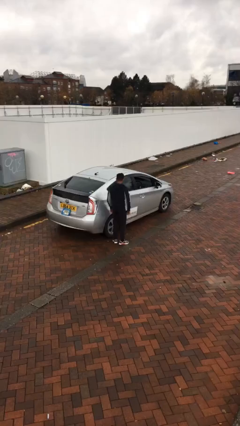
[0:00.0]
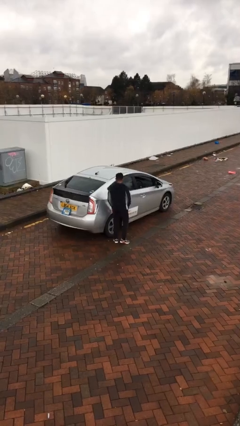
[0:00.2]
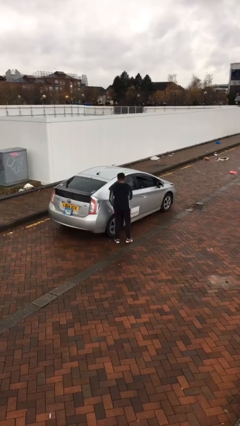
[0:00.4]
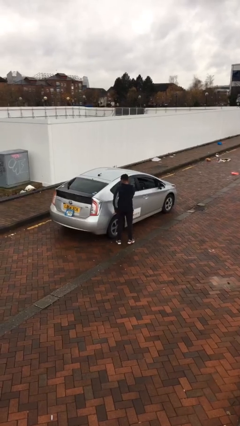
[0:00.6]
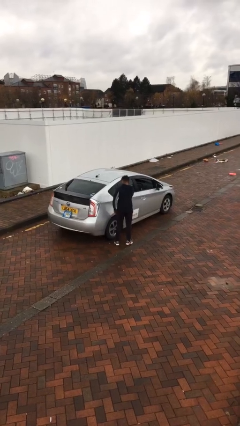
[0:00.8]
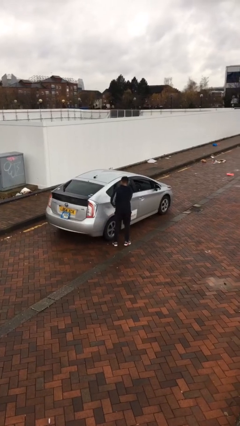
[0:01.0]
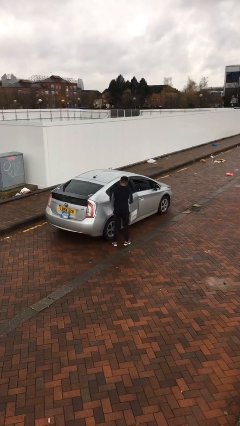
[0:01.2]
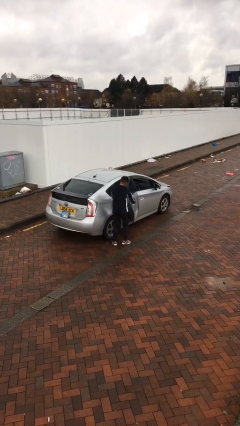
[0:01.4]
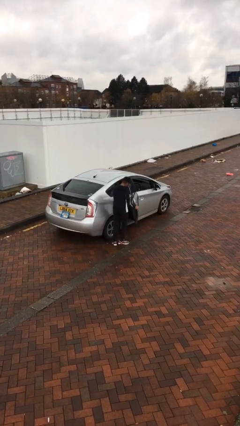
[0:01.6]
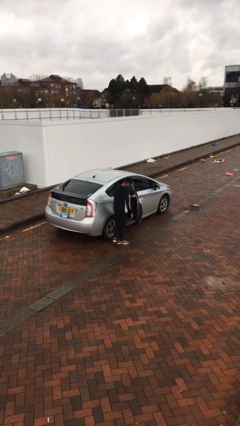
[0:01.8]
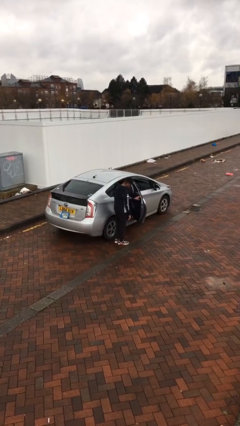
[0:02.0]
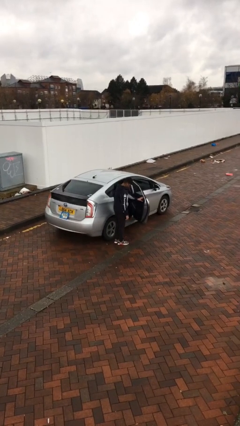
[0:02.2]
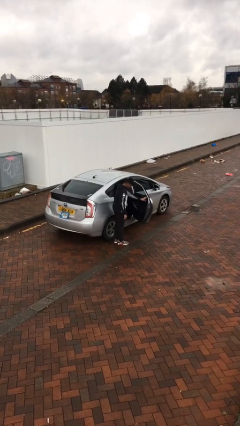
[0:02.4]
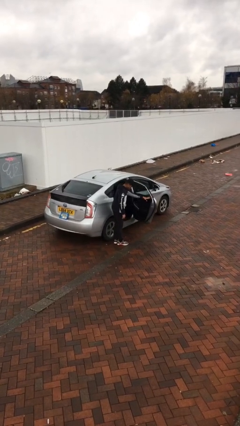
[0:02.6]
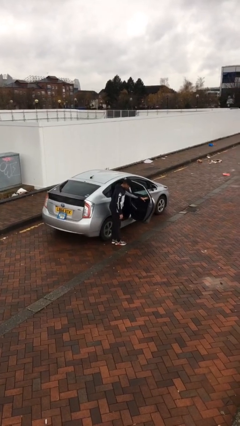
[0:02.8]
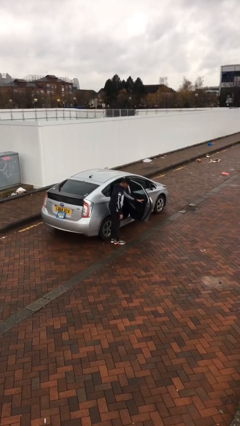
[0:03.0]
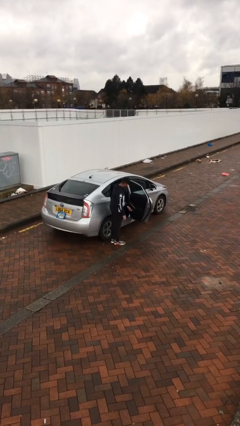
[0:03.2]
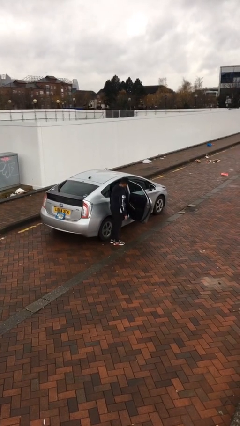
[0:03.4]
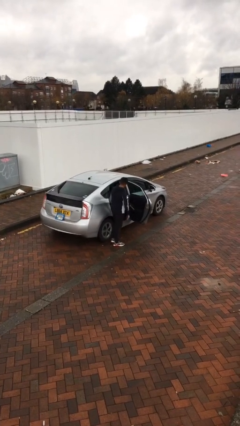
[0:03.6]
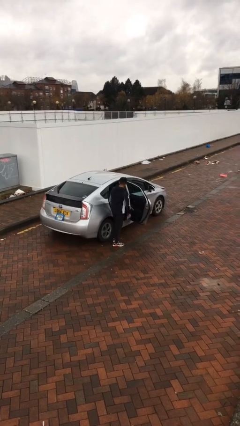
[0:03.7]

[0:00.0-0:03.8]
person opens car door

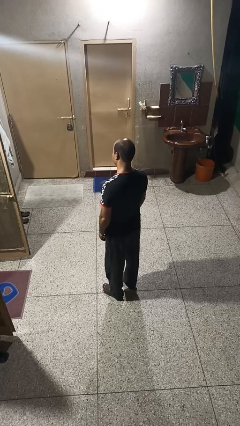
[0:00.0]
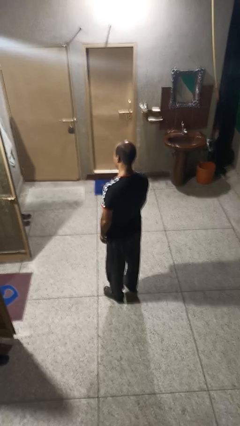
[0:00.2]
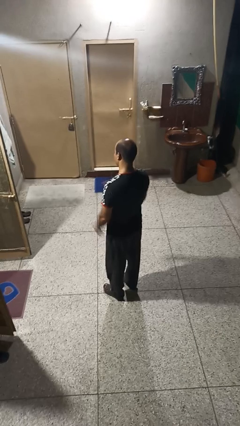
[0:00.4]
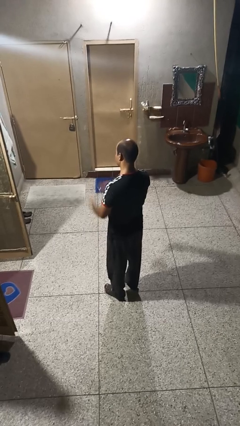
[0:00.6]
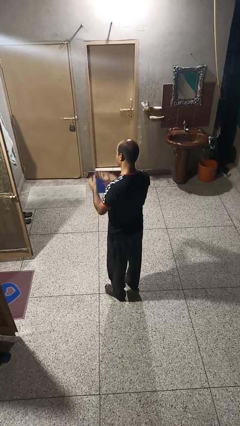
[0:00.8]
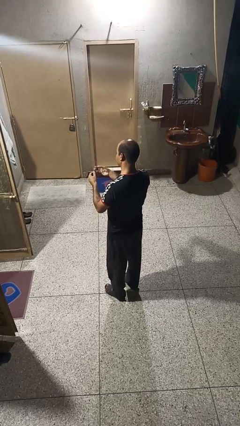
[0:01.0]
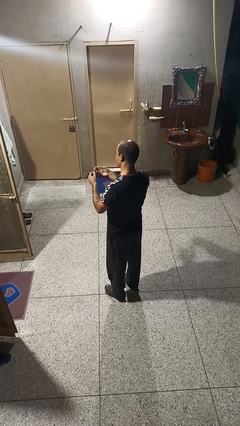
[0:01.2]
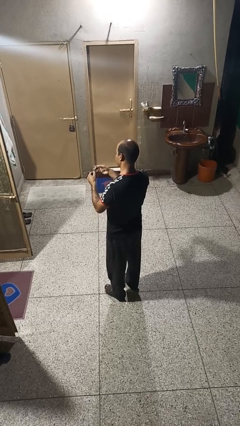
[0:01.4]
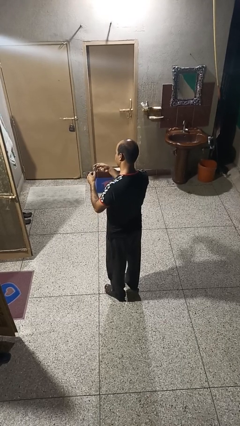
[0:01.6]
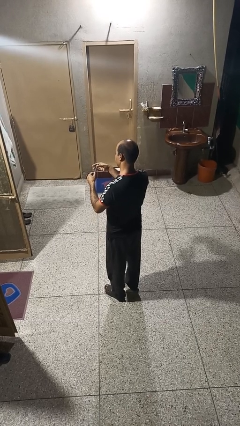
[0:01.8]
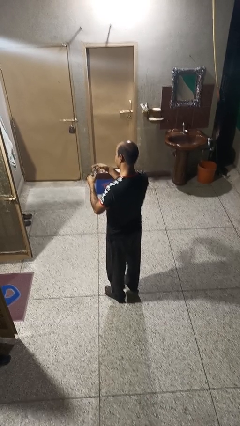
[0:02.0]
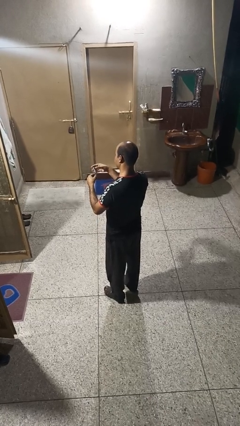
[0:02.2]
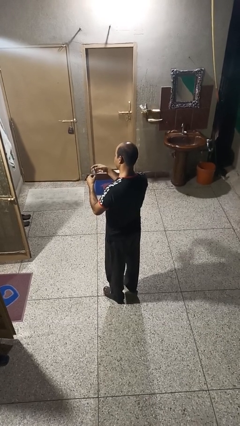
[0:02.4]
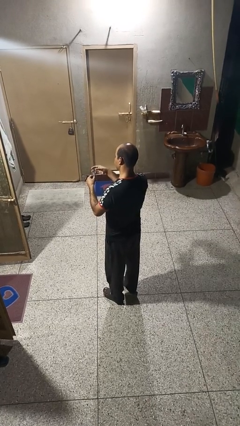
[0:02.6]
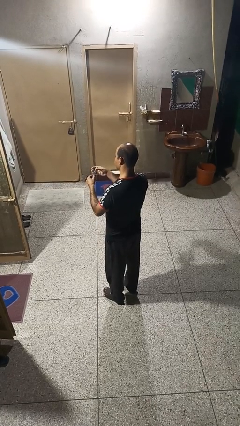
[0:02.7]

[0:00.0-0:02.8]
person clips fingernails

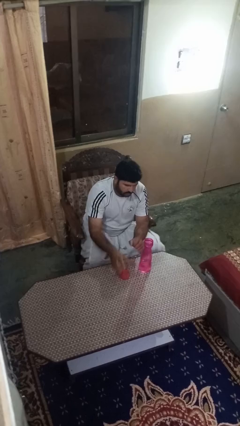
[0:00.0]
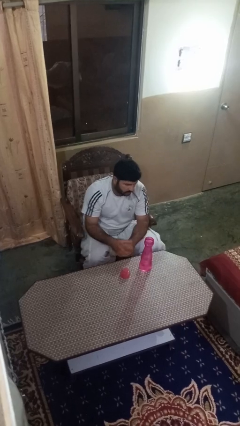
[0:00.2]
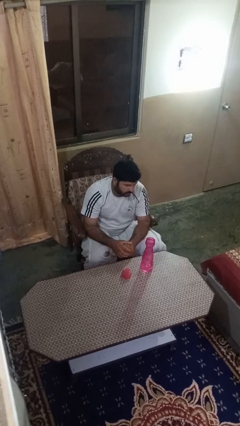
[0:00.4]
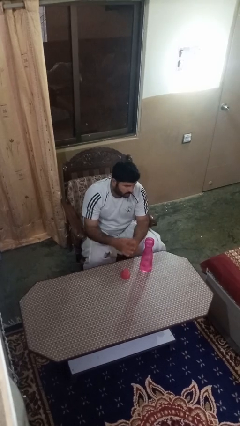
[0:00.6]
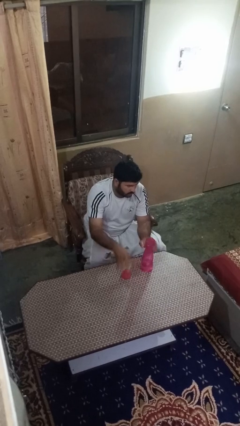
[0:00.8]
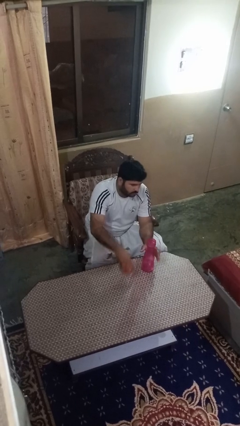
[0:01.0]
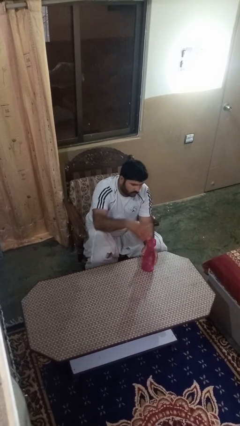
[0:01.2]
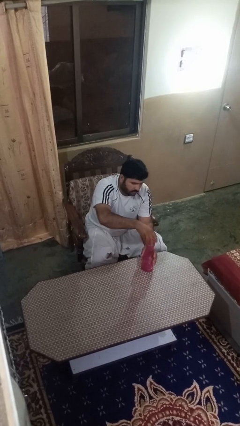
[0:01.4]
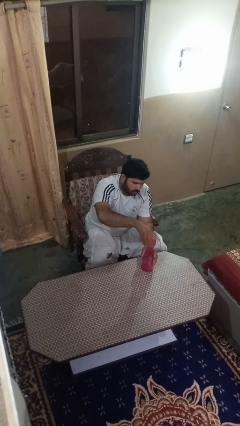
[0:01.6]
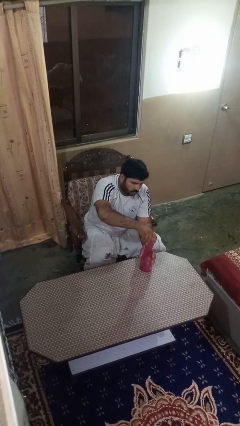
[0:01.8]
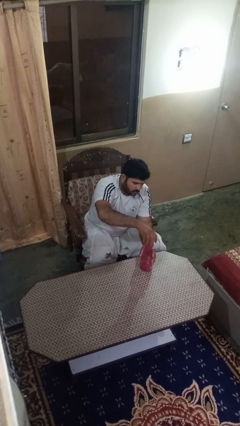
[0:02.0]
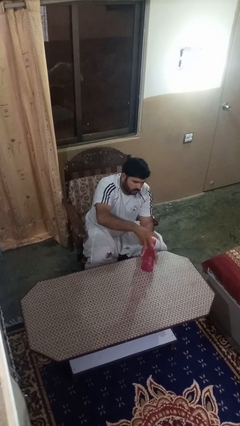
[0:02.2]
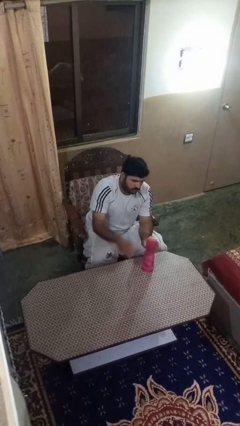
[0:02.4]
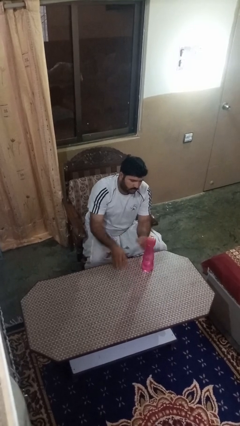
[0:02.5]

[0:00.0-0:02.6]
person screws lid to bottle

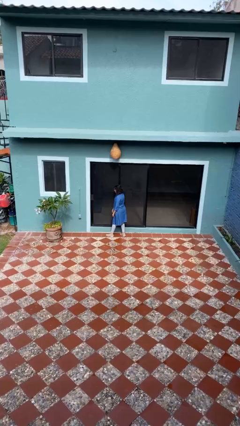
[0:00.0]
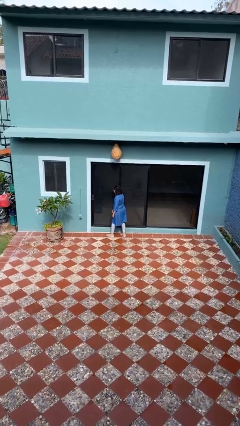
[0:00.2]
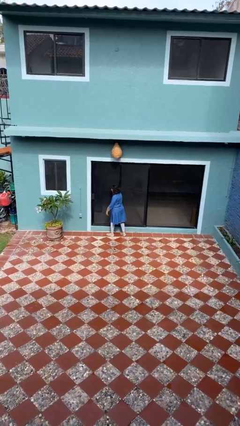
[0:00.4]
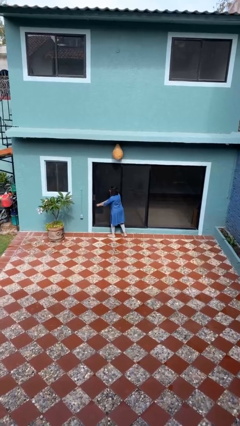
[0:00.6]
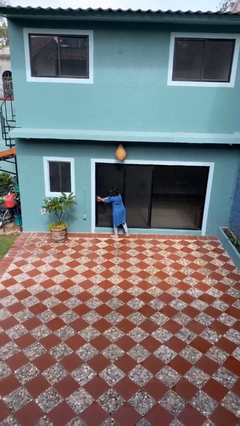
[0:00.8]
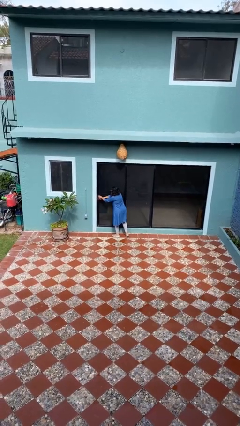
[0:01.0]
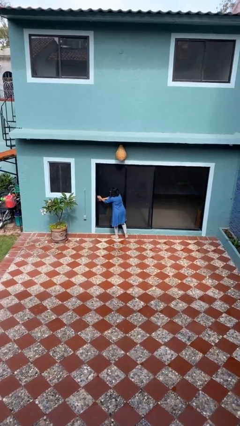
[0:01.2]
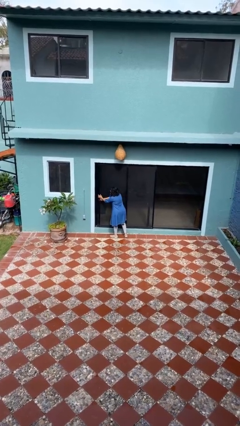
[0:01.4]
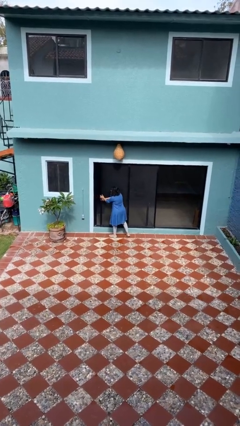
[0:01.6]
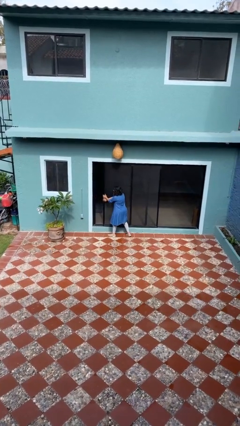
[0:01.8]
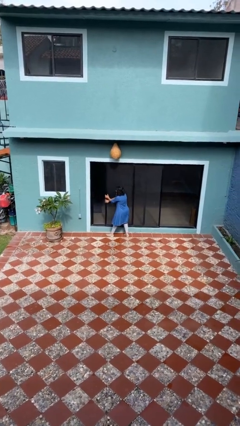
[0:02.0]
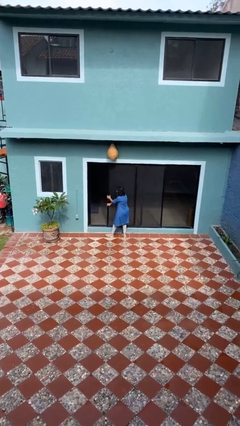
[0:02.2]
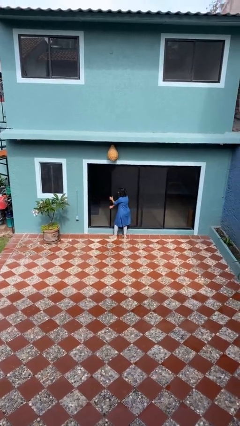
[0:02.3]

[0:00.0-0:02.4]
person opens sliding door

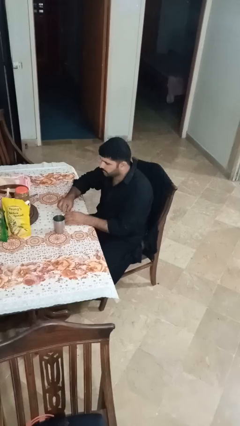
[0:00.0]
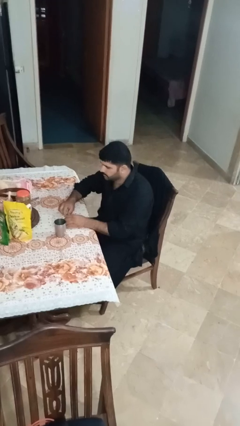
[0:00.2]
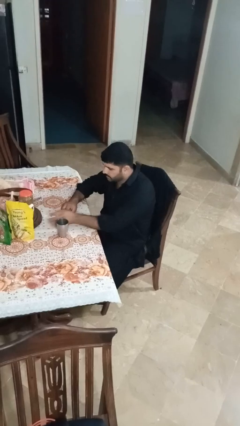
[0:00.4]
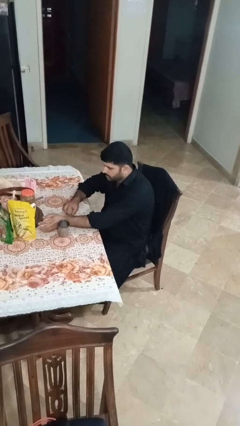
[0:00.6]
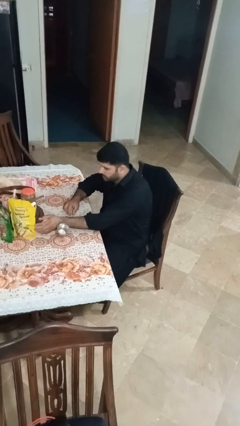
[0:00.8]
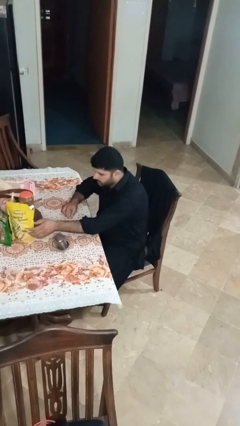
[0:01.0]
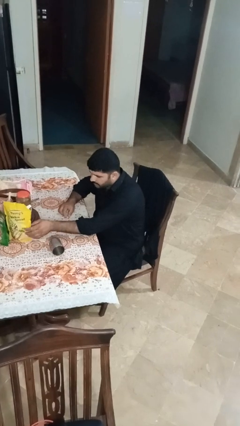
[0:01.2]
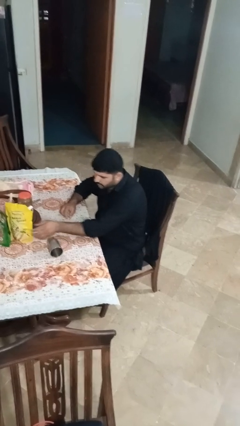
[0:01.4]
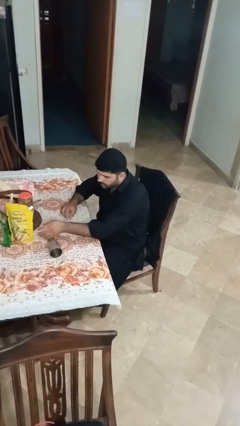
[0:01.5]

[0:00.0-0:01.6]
person knocks over glass

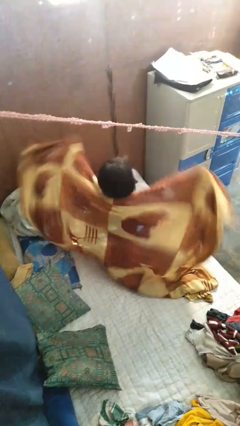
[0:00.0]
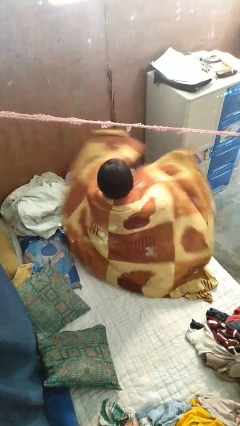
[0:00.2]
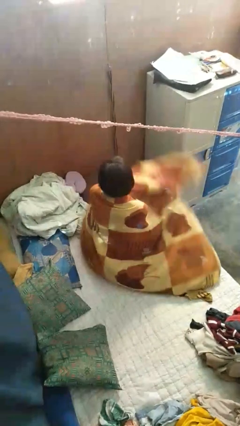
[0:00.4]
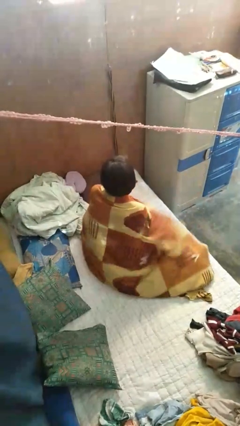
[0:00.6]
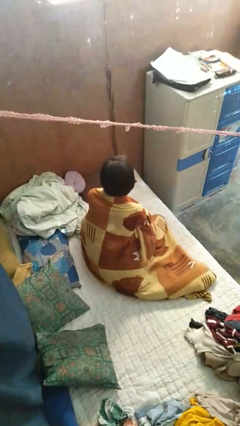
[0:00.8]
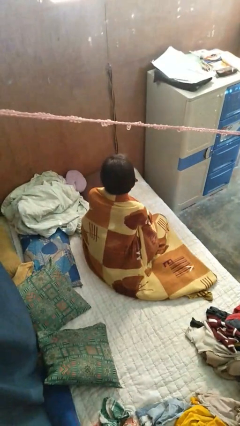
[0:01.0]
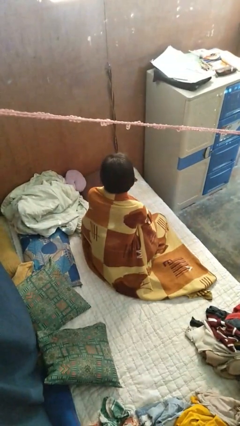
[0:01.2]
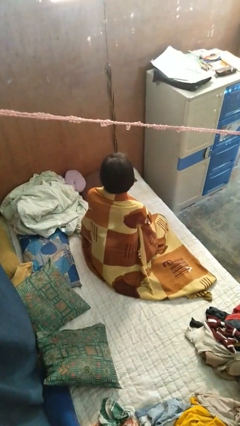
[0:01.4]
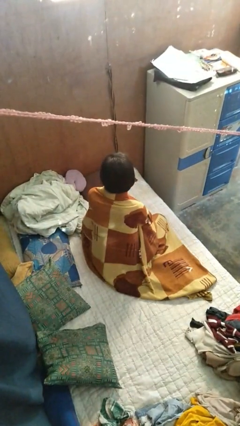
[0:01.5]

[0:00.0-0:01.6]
person covers with blanket

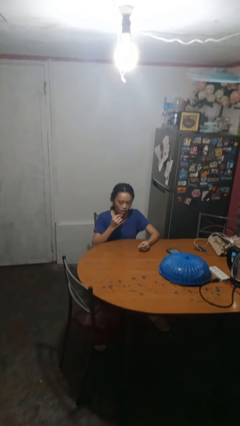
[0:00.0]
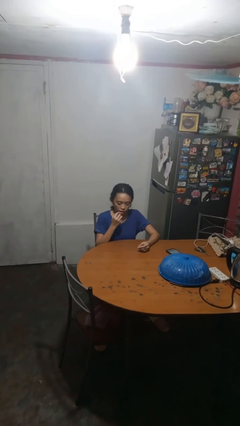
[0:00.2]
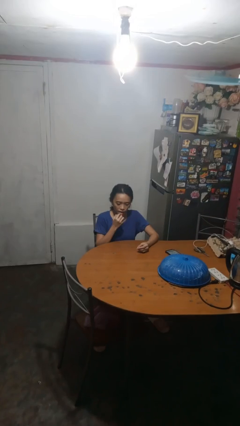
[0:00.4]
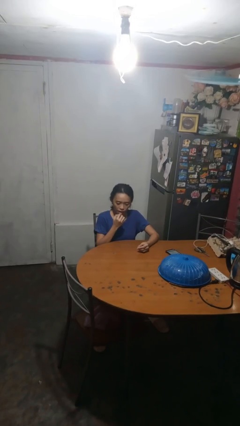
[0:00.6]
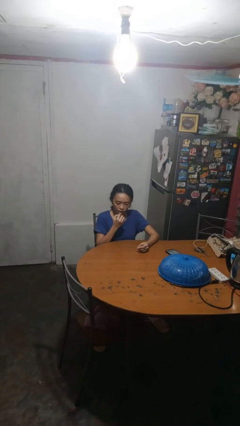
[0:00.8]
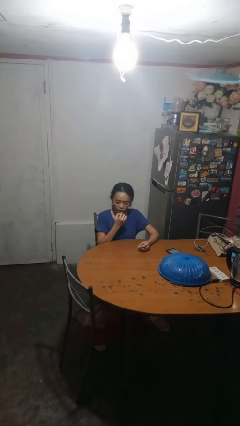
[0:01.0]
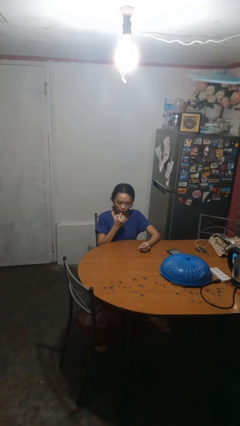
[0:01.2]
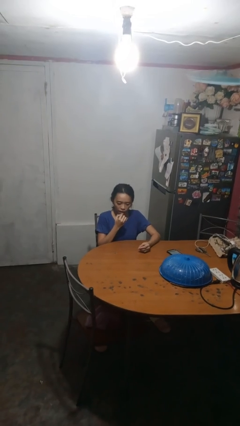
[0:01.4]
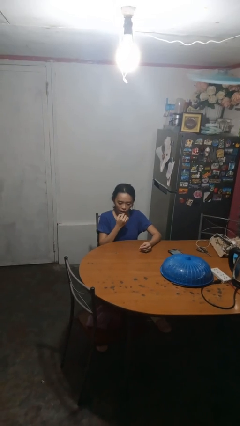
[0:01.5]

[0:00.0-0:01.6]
person applies lip makeup

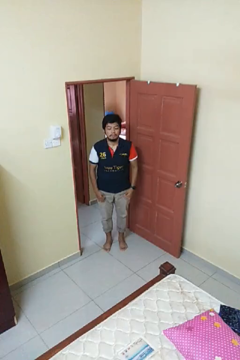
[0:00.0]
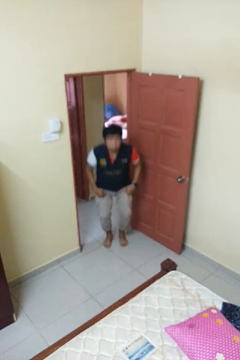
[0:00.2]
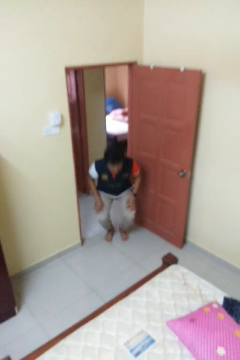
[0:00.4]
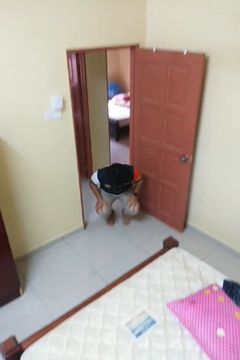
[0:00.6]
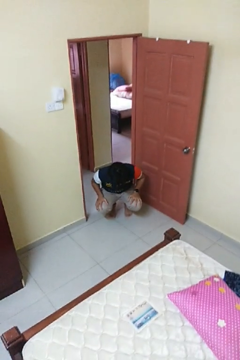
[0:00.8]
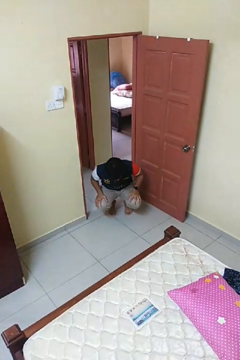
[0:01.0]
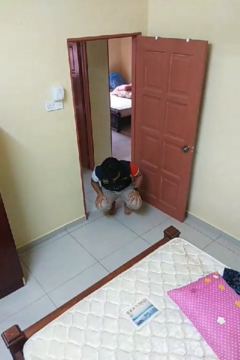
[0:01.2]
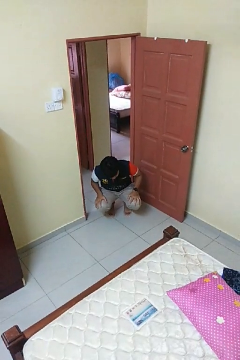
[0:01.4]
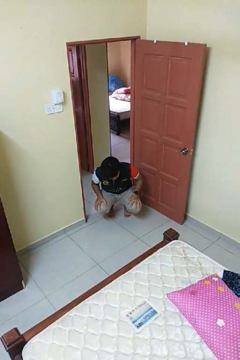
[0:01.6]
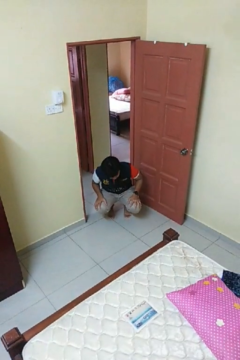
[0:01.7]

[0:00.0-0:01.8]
person squats
